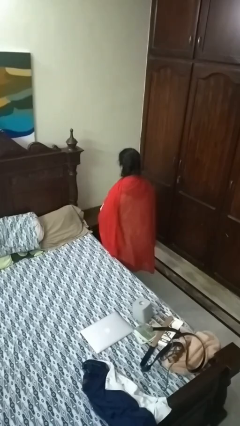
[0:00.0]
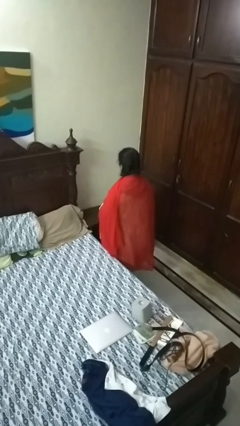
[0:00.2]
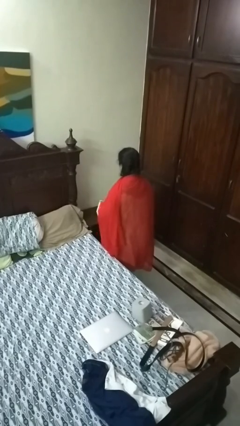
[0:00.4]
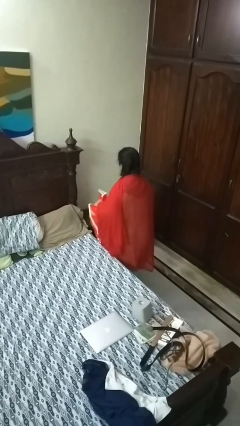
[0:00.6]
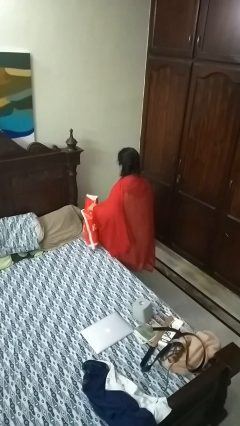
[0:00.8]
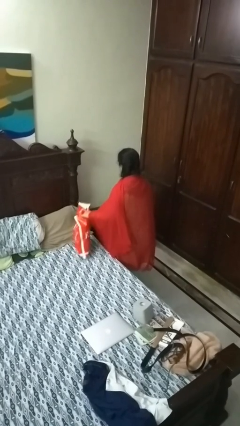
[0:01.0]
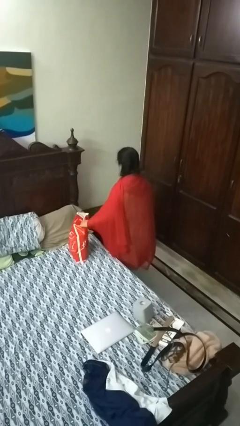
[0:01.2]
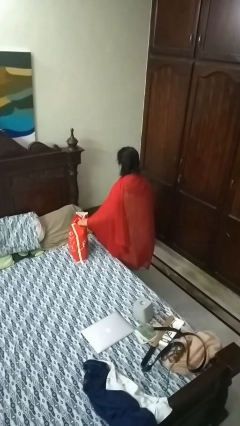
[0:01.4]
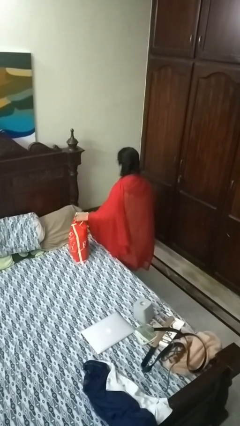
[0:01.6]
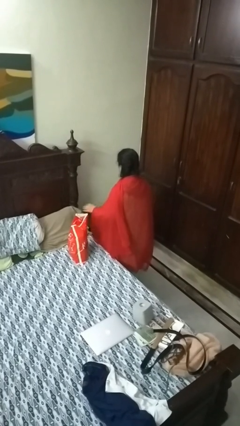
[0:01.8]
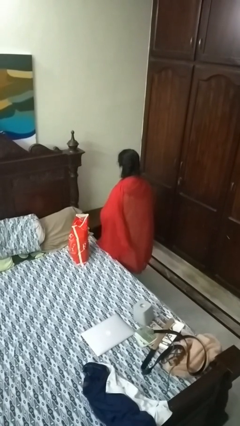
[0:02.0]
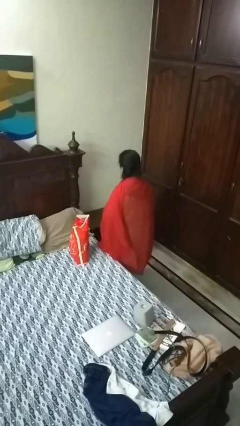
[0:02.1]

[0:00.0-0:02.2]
person puts down object on bed

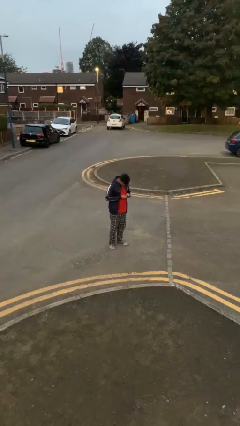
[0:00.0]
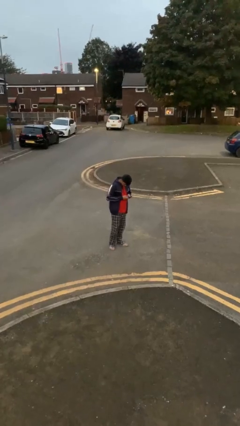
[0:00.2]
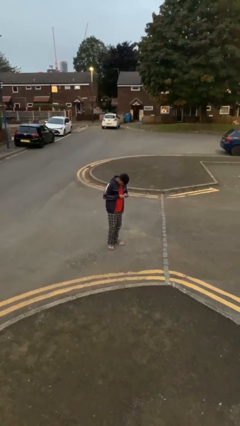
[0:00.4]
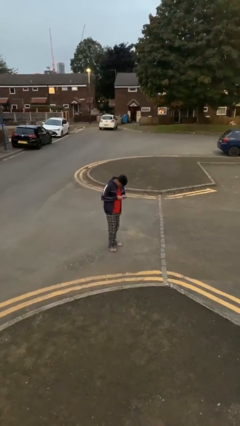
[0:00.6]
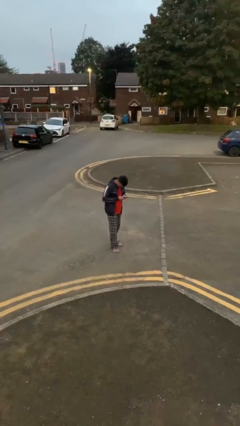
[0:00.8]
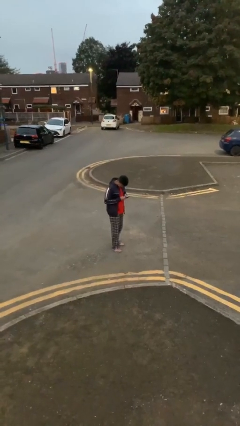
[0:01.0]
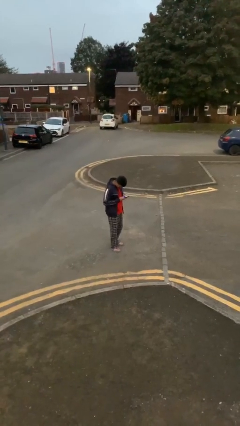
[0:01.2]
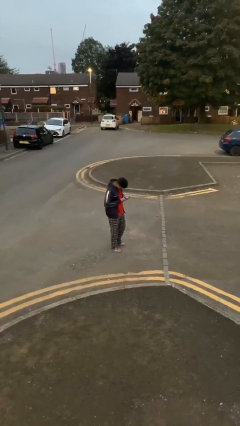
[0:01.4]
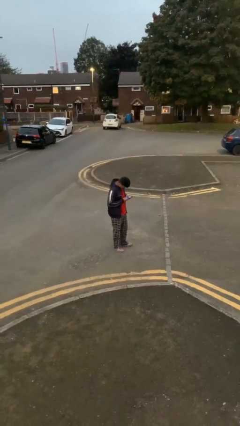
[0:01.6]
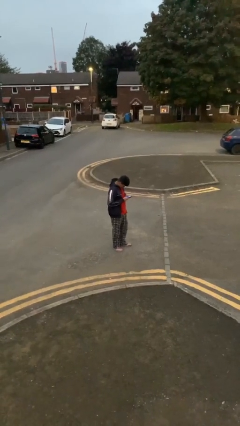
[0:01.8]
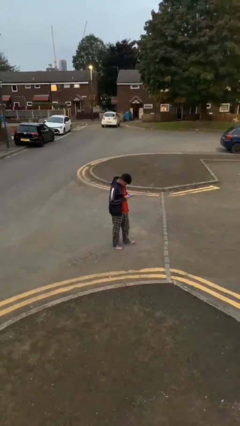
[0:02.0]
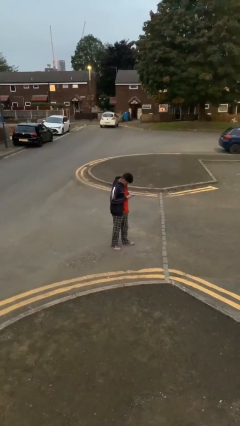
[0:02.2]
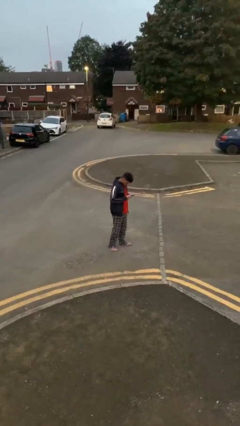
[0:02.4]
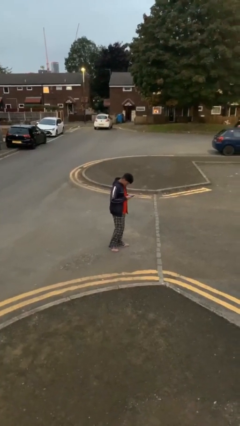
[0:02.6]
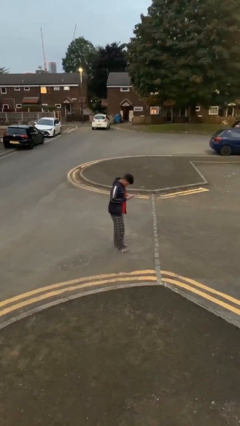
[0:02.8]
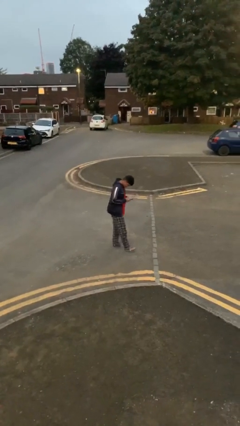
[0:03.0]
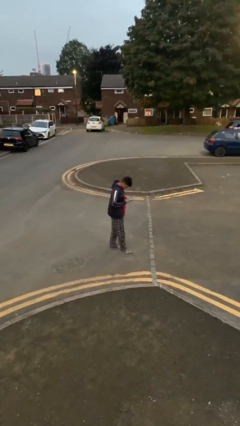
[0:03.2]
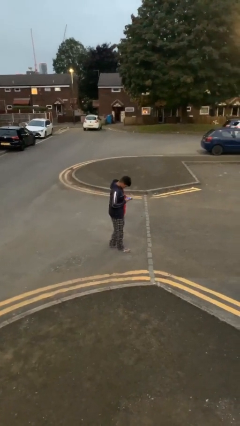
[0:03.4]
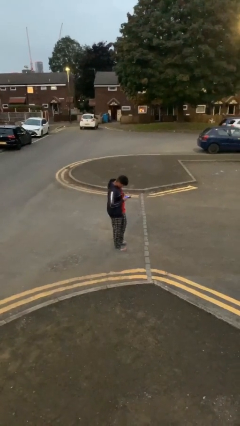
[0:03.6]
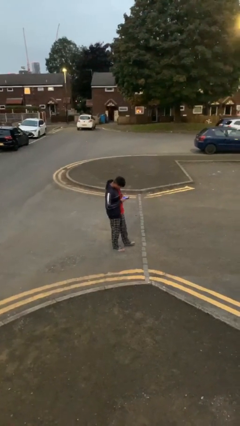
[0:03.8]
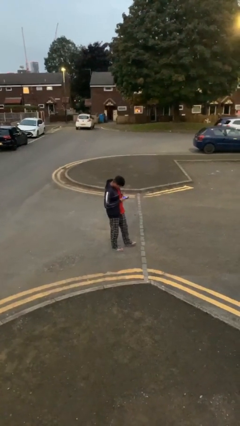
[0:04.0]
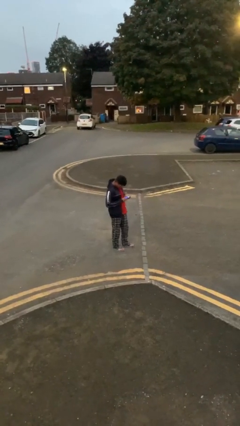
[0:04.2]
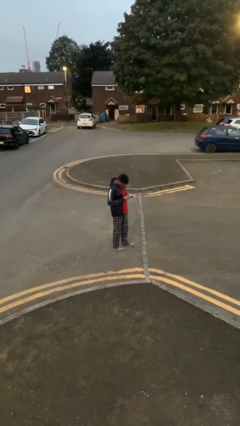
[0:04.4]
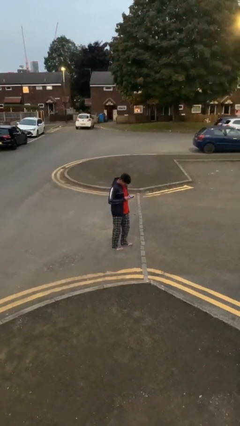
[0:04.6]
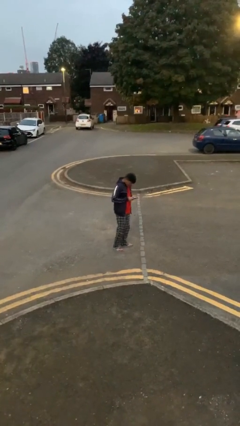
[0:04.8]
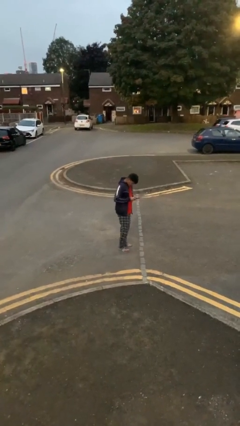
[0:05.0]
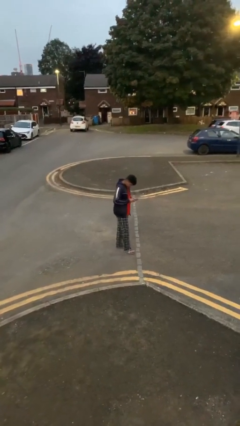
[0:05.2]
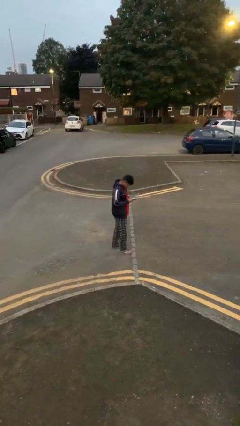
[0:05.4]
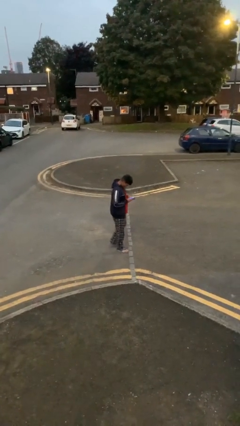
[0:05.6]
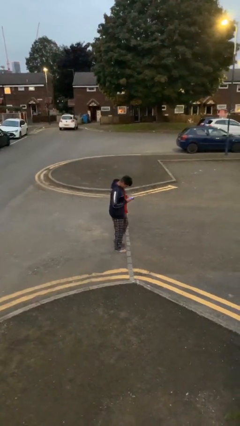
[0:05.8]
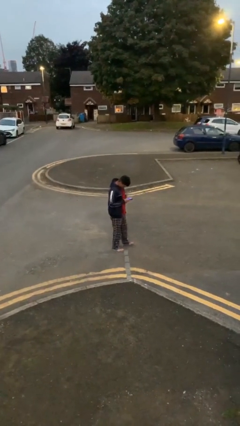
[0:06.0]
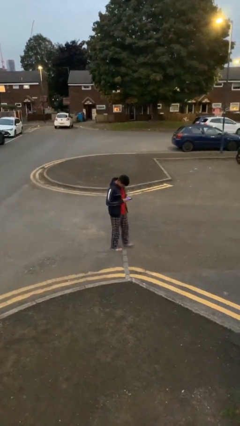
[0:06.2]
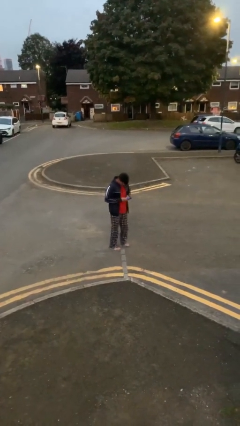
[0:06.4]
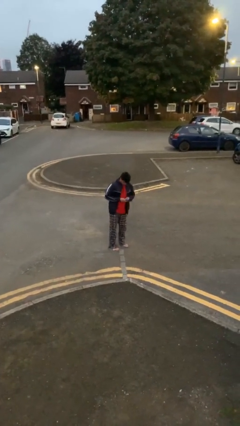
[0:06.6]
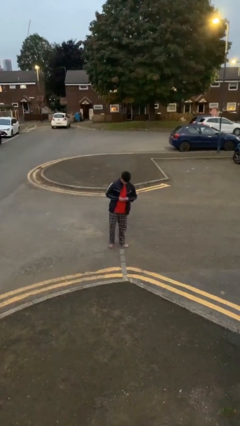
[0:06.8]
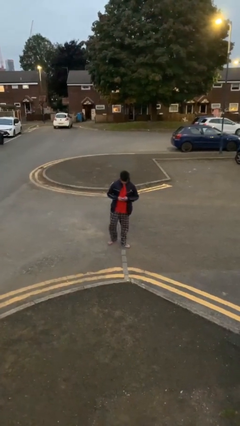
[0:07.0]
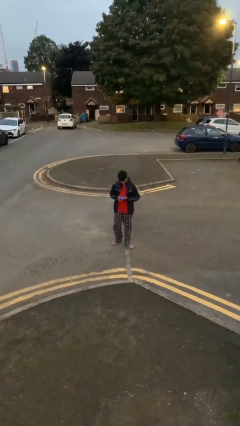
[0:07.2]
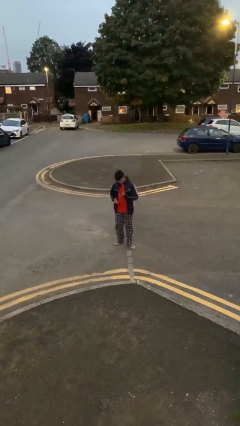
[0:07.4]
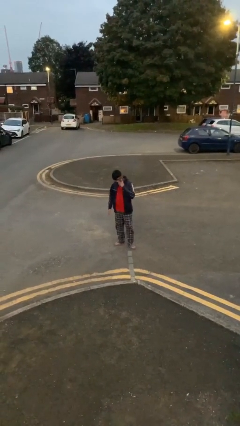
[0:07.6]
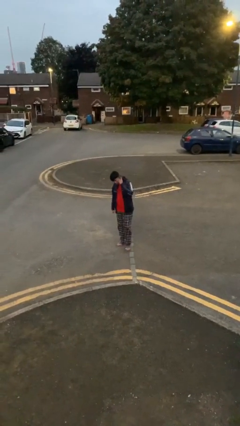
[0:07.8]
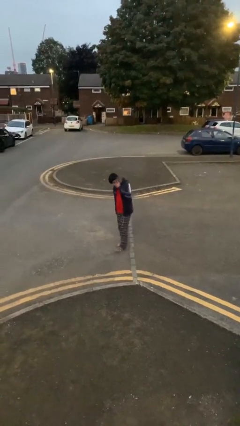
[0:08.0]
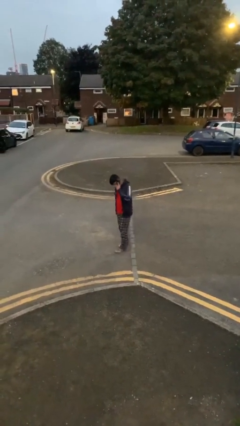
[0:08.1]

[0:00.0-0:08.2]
person texts on phone

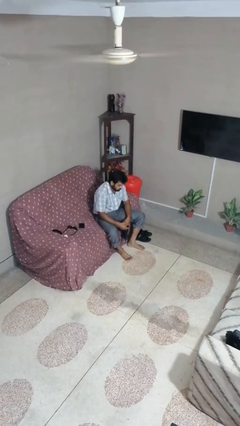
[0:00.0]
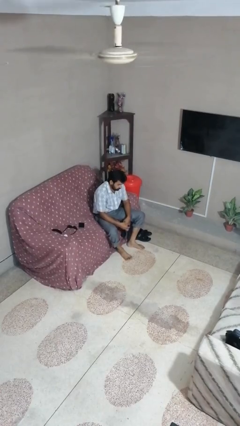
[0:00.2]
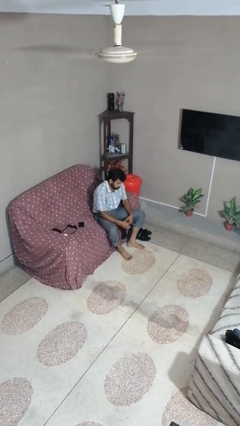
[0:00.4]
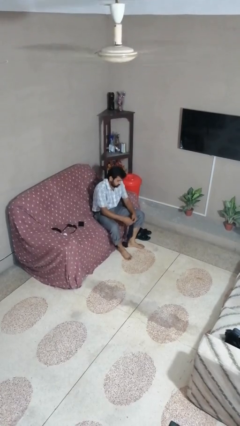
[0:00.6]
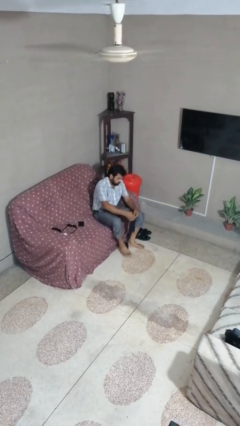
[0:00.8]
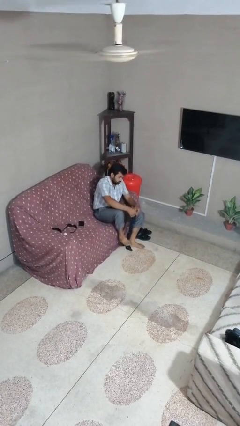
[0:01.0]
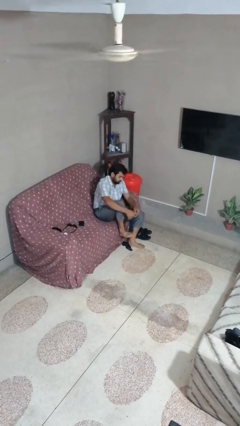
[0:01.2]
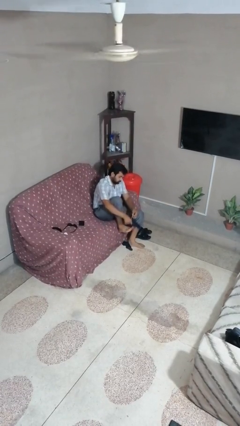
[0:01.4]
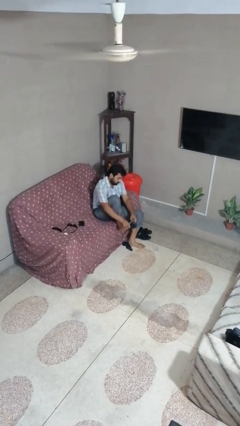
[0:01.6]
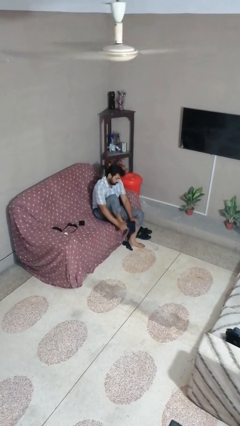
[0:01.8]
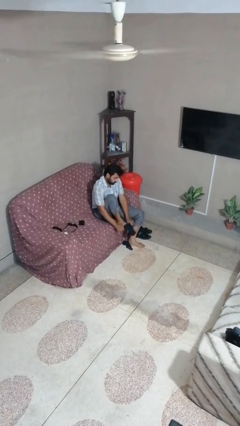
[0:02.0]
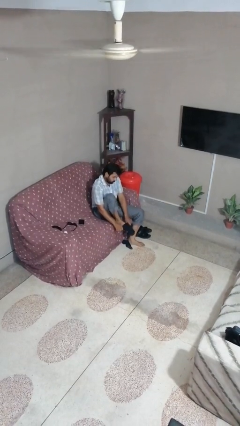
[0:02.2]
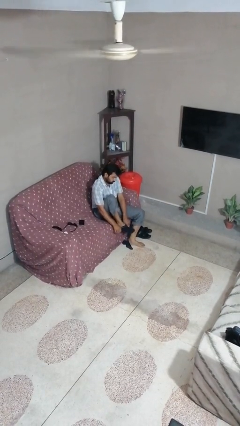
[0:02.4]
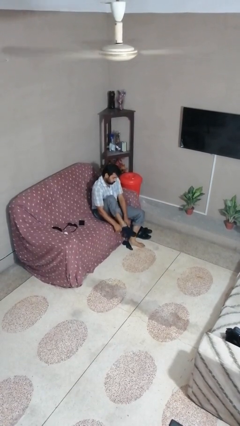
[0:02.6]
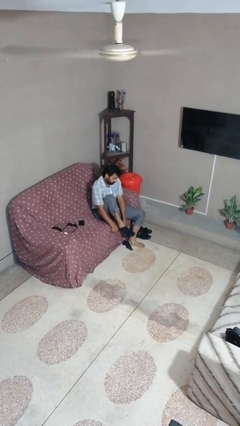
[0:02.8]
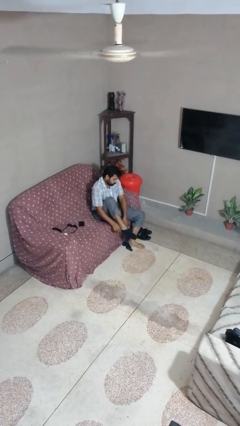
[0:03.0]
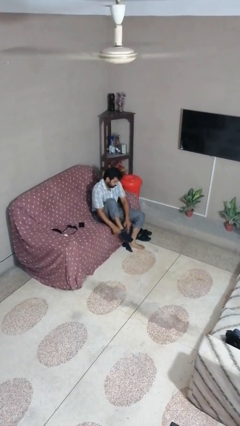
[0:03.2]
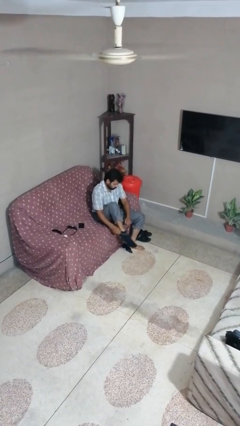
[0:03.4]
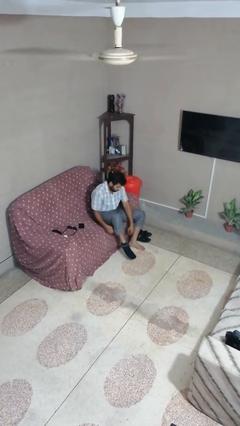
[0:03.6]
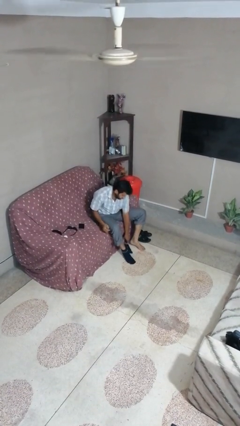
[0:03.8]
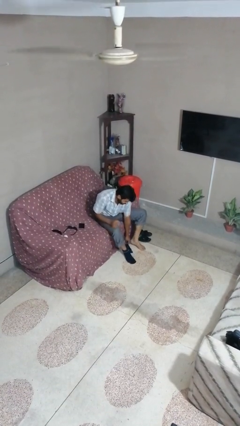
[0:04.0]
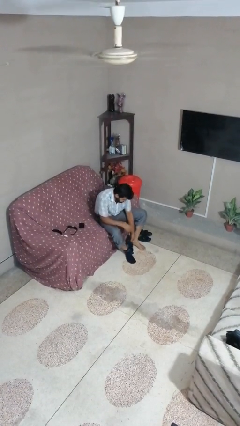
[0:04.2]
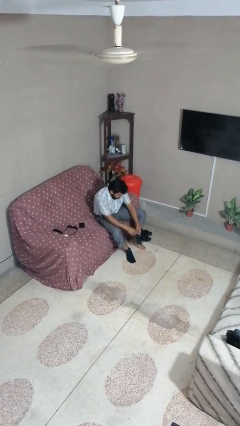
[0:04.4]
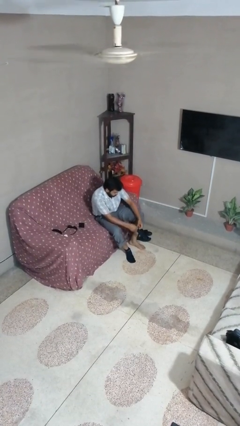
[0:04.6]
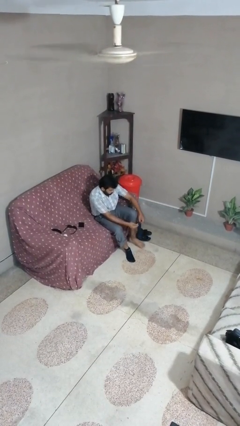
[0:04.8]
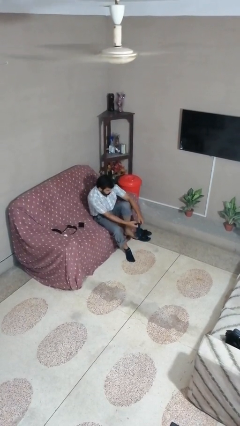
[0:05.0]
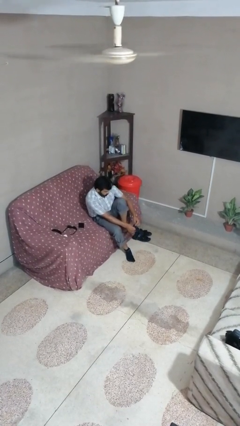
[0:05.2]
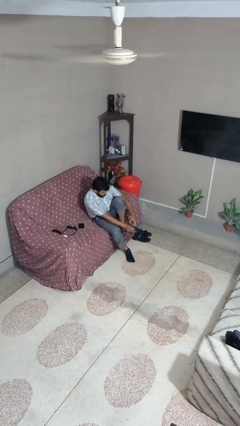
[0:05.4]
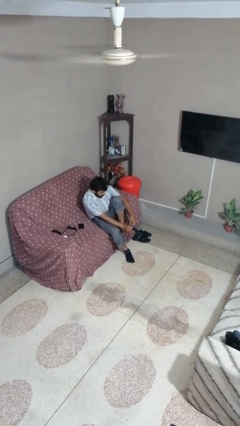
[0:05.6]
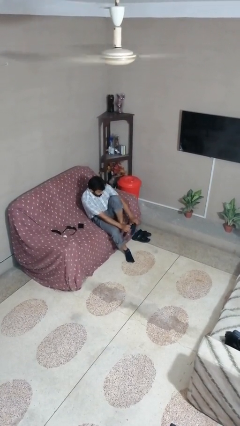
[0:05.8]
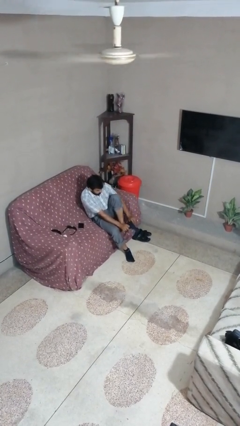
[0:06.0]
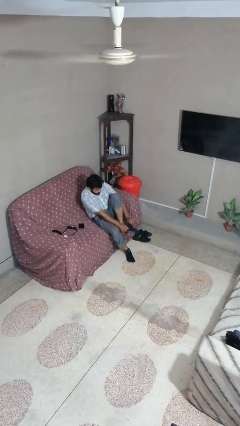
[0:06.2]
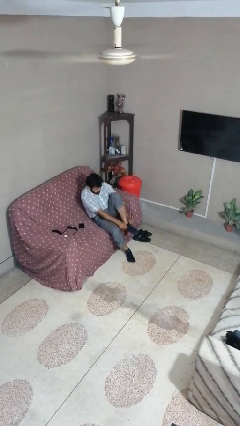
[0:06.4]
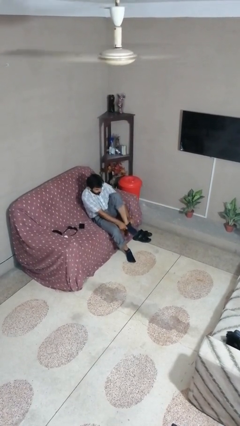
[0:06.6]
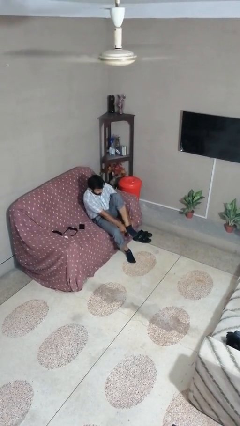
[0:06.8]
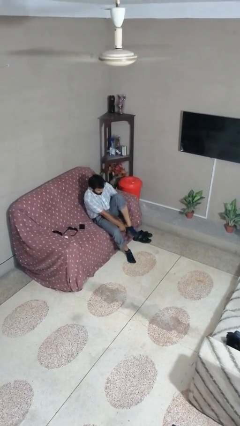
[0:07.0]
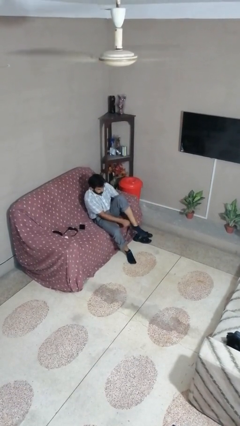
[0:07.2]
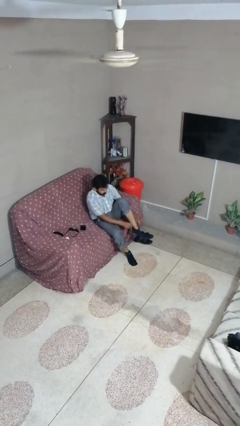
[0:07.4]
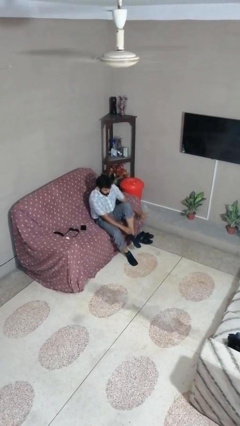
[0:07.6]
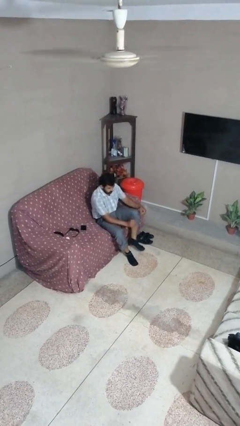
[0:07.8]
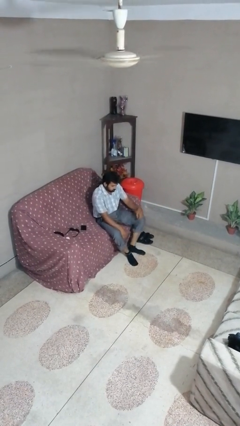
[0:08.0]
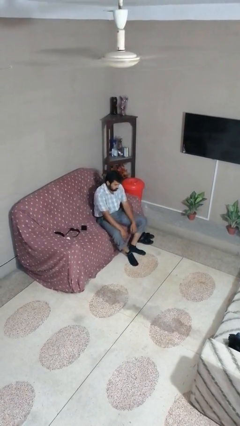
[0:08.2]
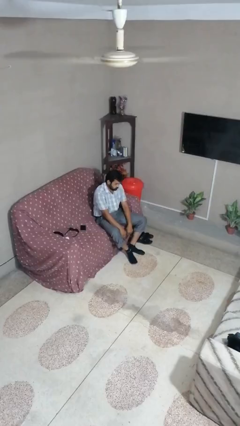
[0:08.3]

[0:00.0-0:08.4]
person puts on socks
